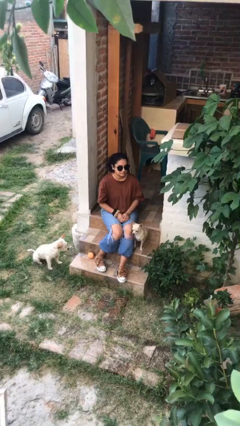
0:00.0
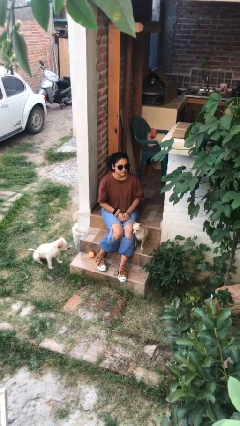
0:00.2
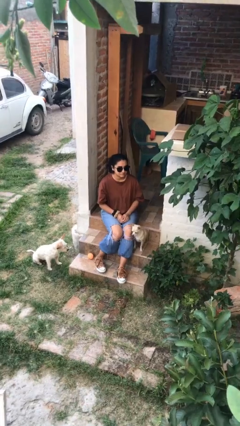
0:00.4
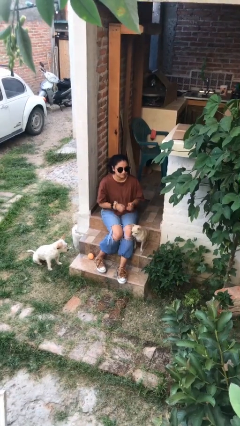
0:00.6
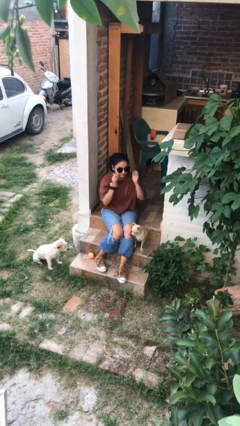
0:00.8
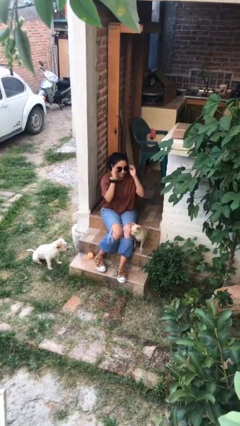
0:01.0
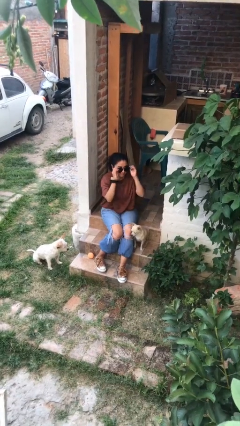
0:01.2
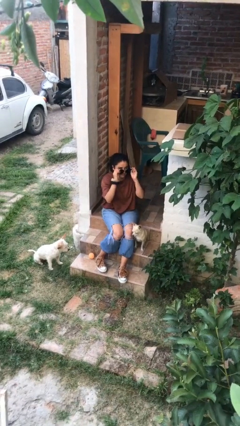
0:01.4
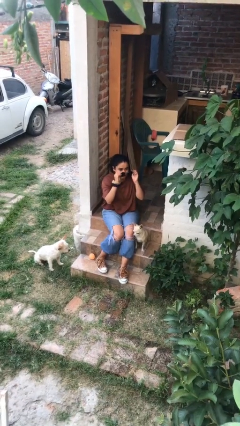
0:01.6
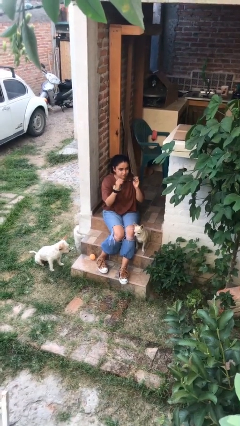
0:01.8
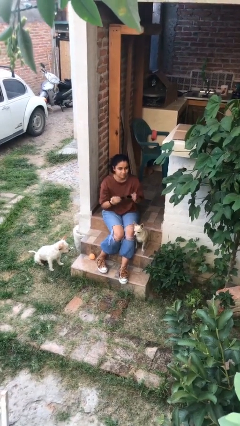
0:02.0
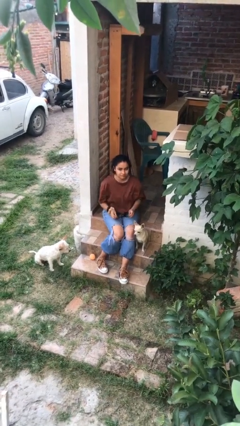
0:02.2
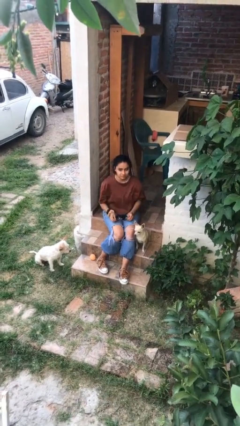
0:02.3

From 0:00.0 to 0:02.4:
person takes off sunglasses

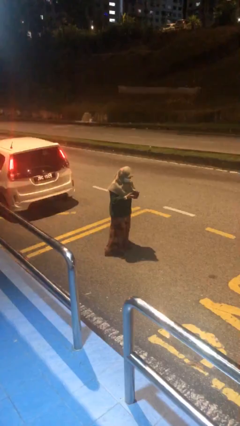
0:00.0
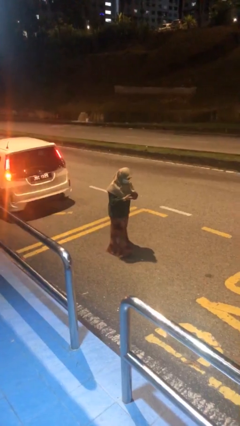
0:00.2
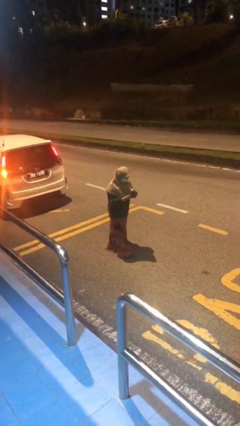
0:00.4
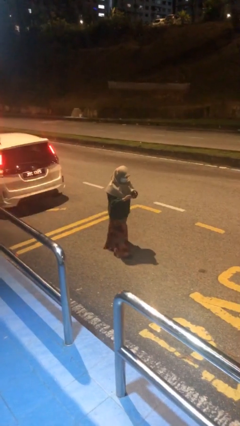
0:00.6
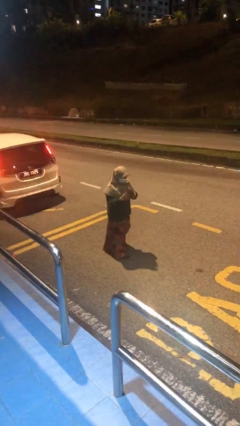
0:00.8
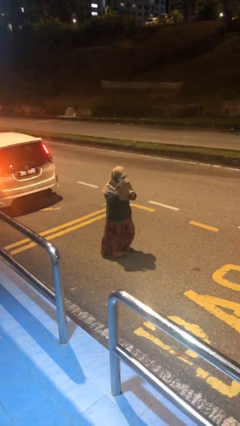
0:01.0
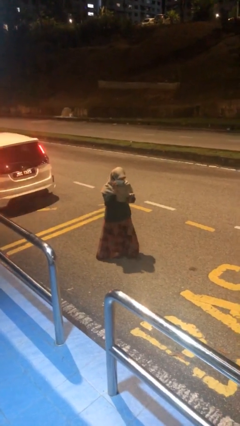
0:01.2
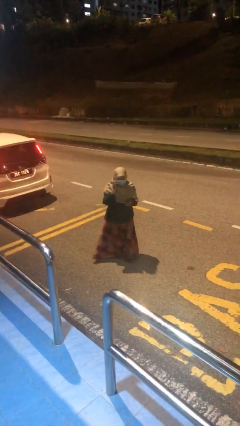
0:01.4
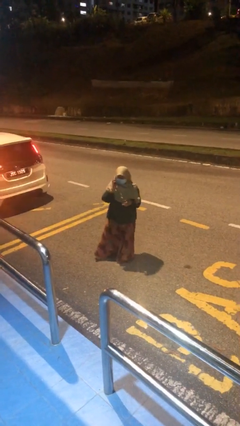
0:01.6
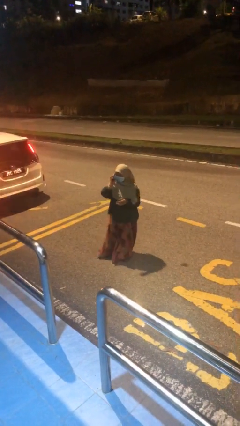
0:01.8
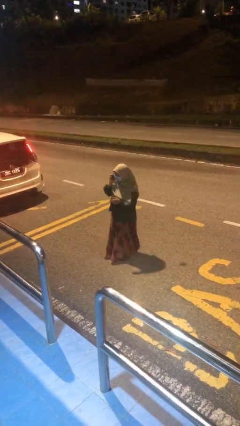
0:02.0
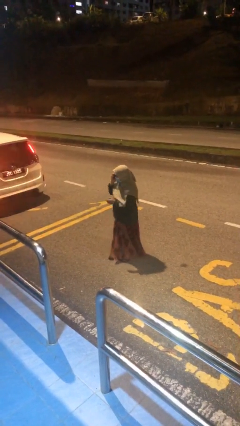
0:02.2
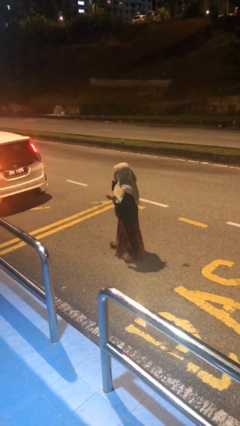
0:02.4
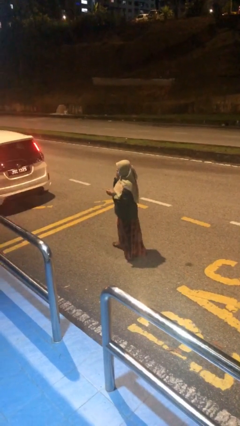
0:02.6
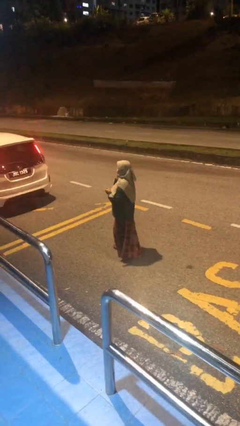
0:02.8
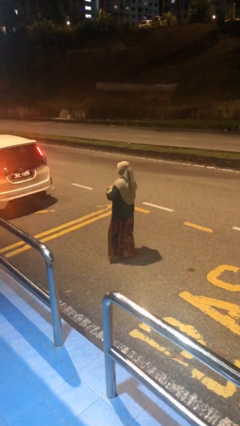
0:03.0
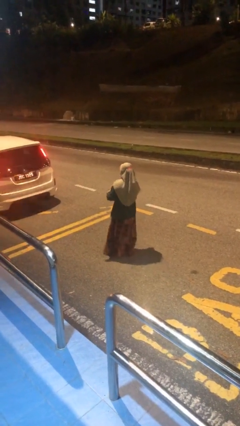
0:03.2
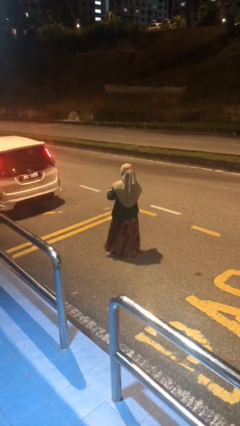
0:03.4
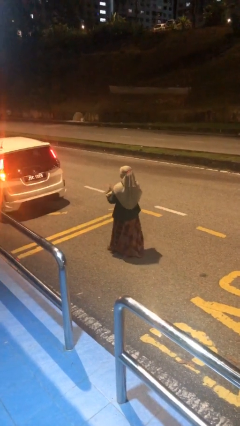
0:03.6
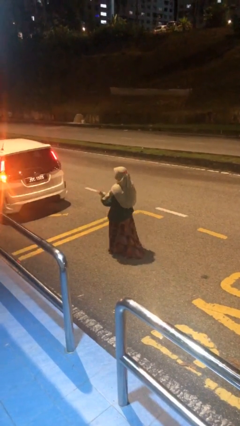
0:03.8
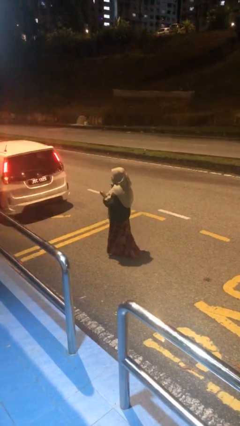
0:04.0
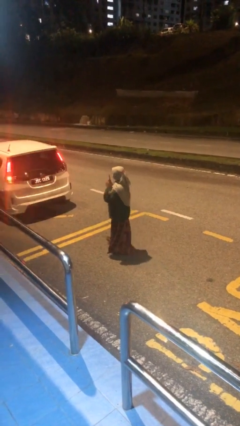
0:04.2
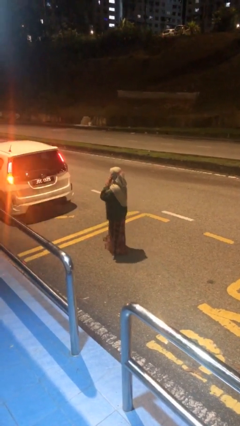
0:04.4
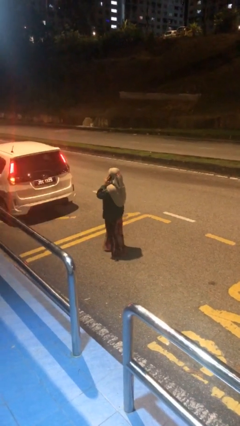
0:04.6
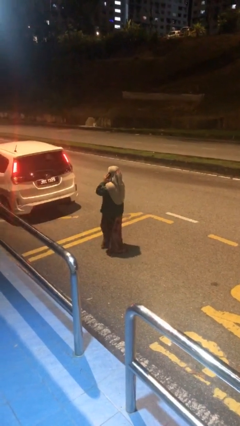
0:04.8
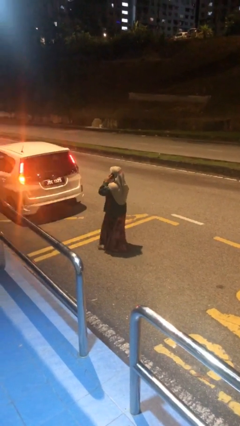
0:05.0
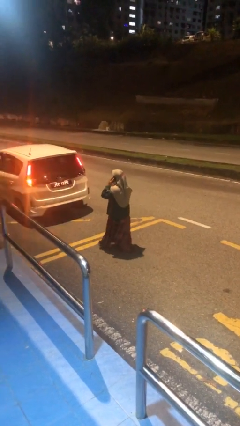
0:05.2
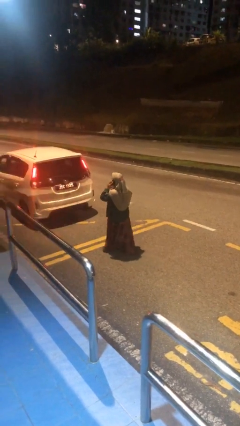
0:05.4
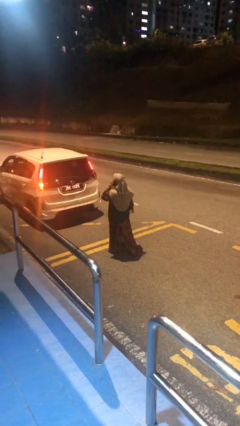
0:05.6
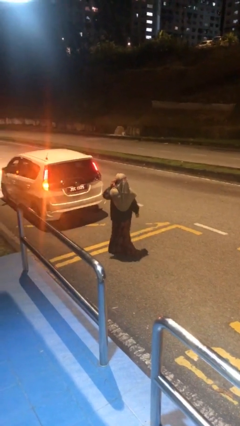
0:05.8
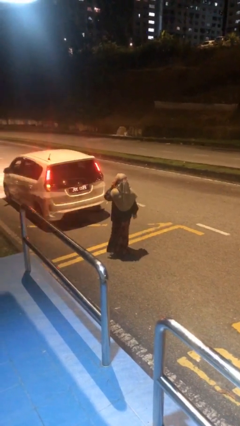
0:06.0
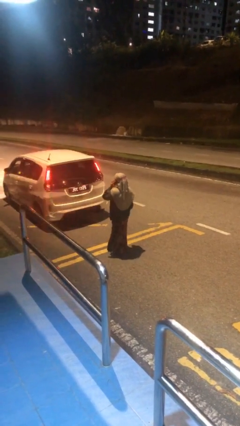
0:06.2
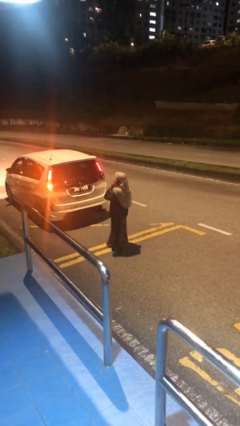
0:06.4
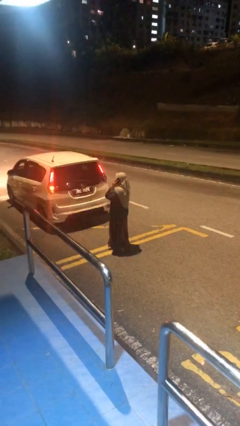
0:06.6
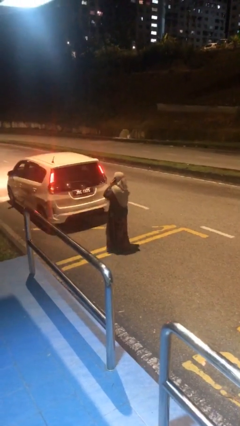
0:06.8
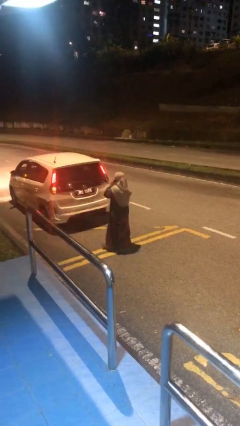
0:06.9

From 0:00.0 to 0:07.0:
person talks on phone

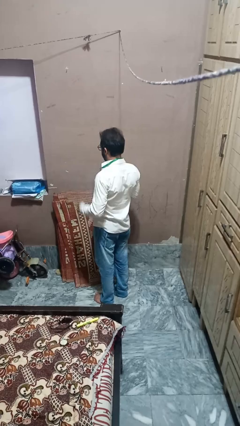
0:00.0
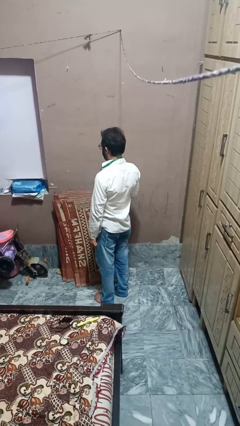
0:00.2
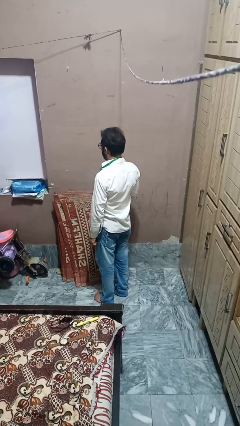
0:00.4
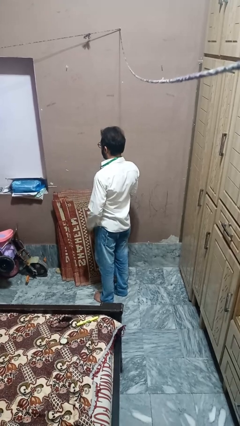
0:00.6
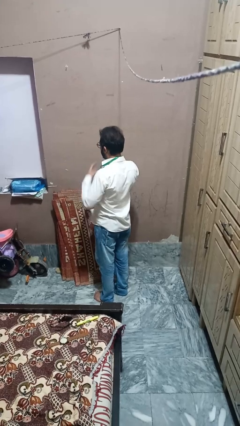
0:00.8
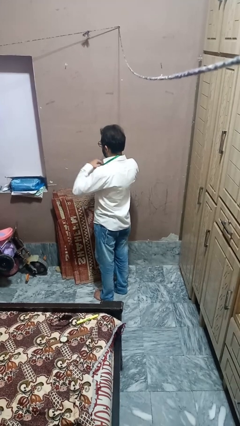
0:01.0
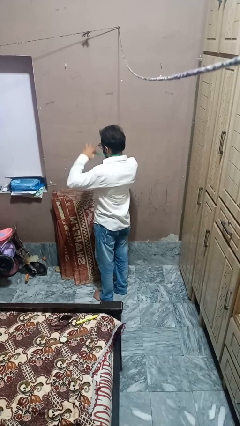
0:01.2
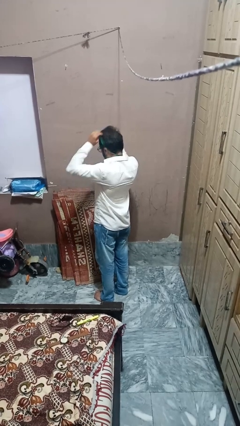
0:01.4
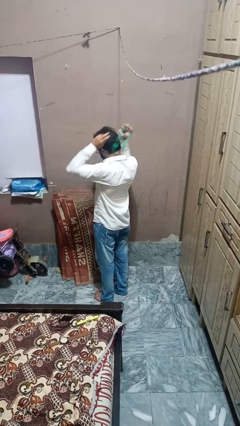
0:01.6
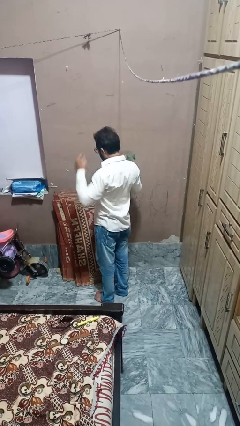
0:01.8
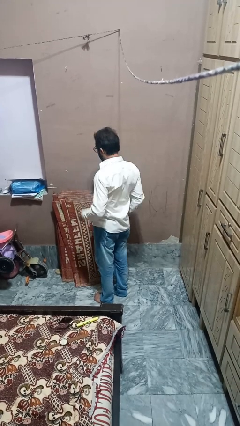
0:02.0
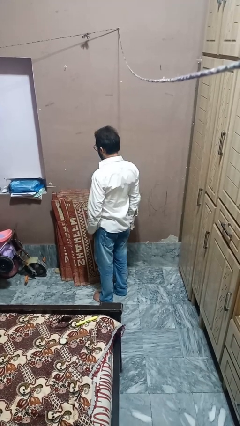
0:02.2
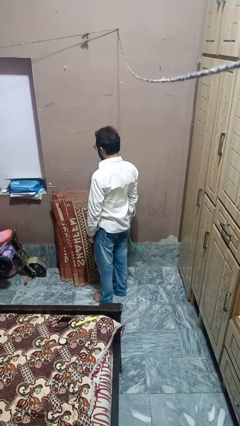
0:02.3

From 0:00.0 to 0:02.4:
person takes off necklace

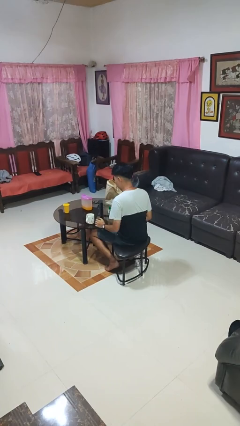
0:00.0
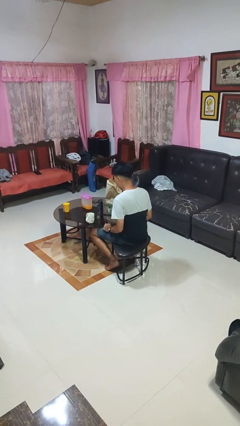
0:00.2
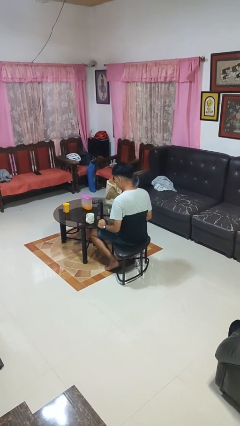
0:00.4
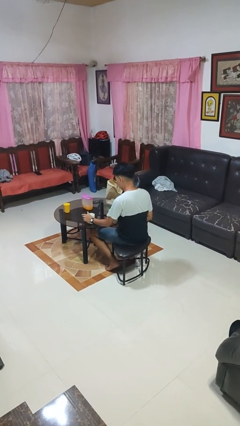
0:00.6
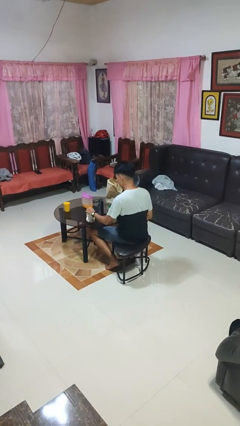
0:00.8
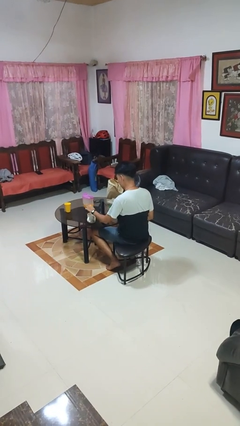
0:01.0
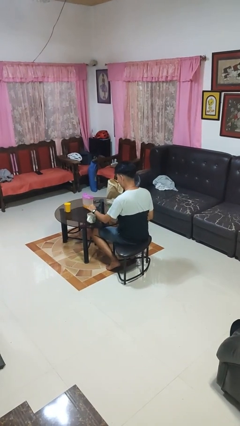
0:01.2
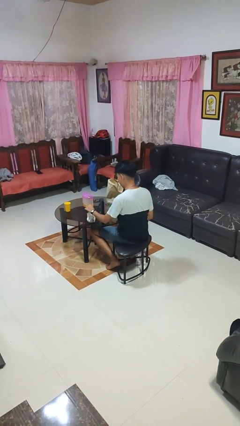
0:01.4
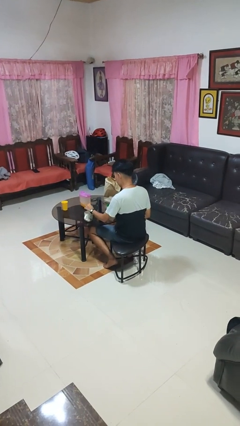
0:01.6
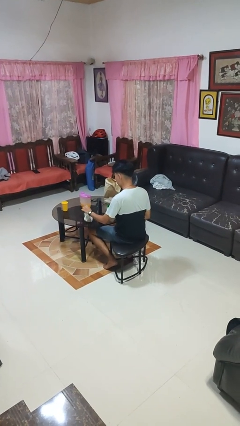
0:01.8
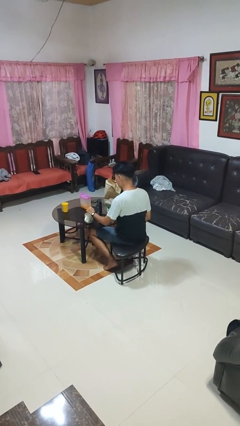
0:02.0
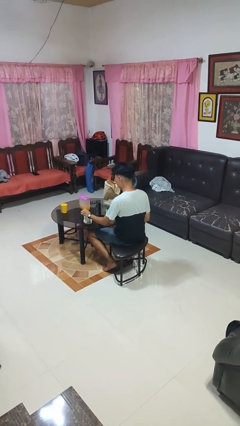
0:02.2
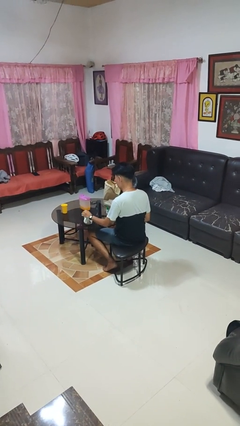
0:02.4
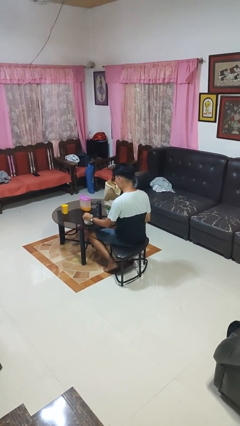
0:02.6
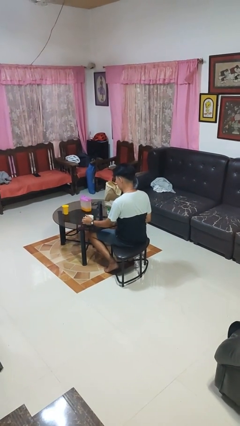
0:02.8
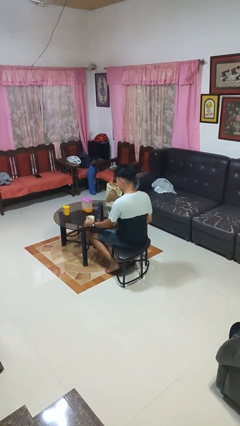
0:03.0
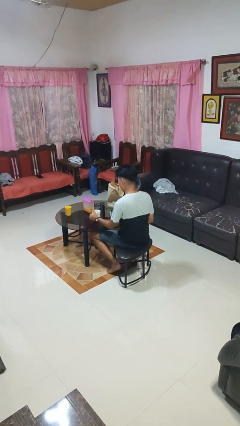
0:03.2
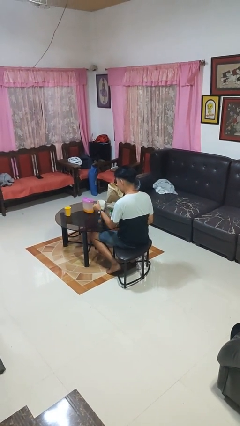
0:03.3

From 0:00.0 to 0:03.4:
person stirs mug

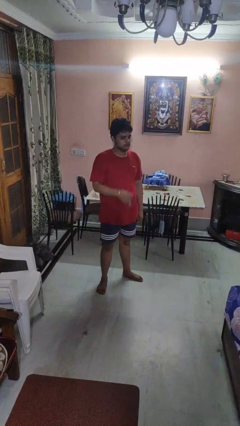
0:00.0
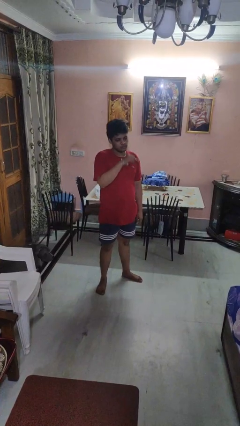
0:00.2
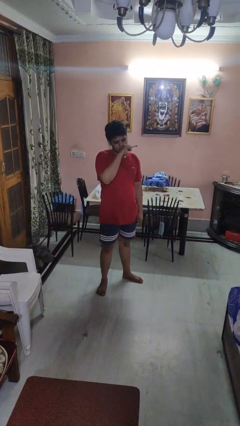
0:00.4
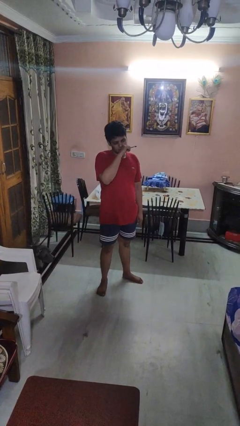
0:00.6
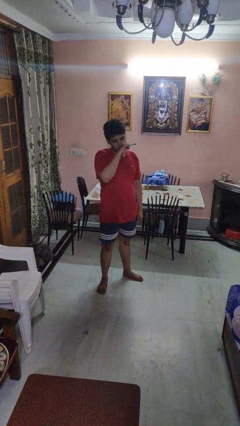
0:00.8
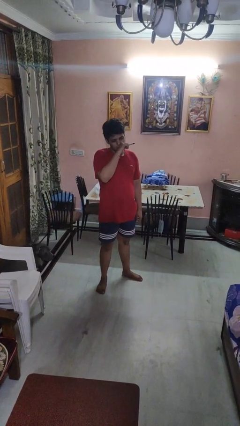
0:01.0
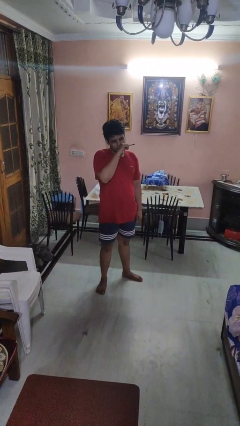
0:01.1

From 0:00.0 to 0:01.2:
person vapes

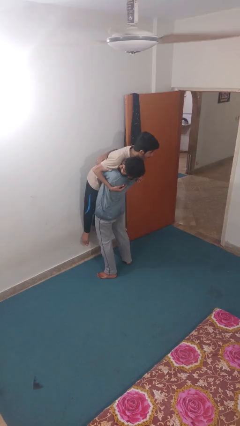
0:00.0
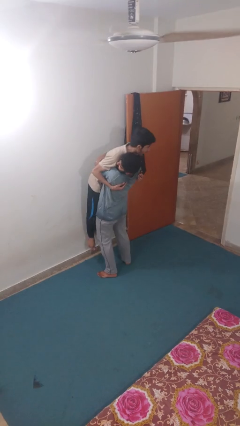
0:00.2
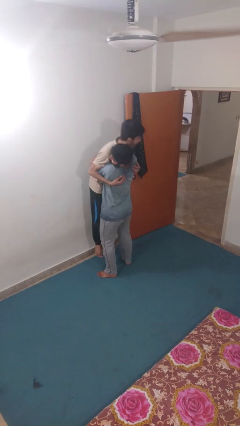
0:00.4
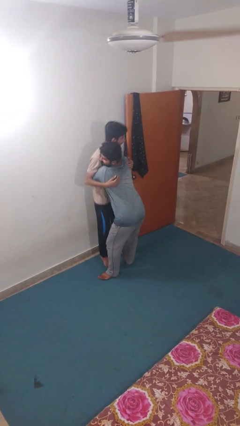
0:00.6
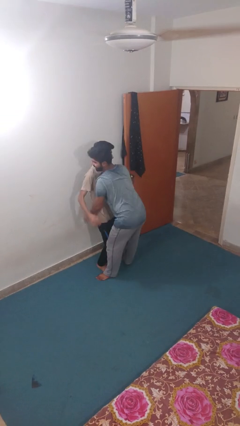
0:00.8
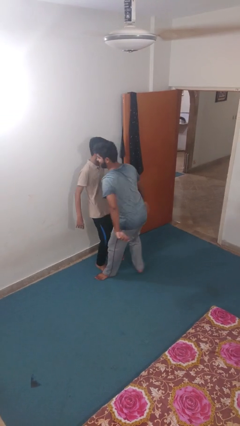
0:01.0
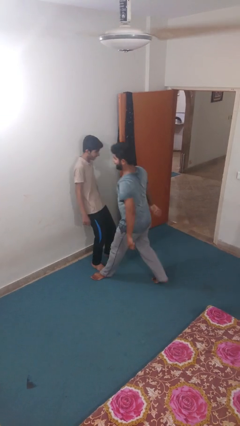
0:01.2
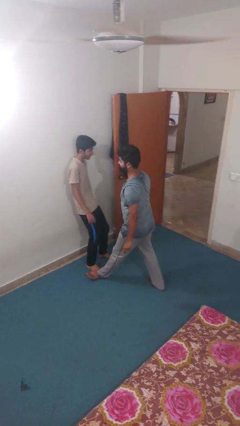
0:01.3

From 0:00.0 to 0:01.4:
person puts down person
